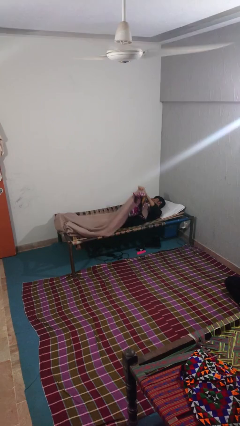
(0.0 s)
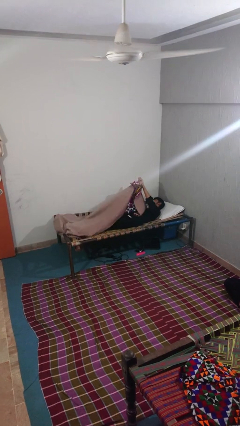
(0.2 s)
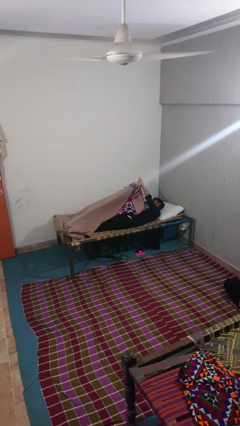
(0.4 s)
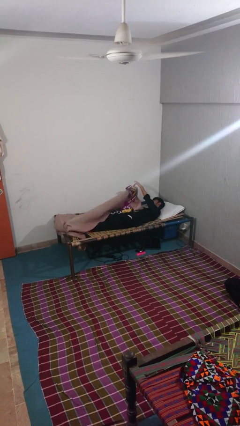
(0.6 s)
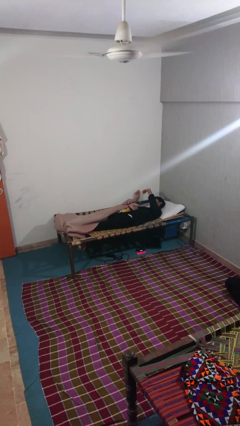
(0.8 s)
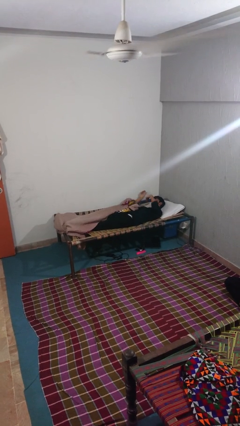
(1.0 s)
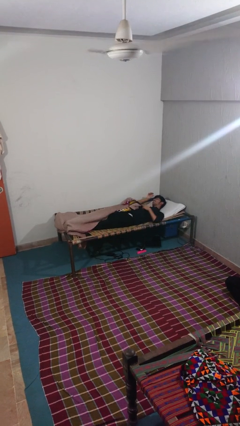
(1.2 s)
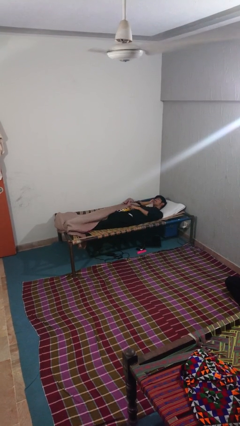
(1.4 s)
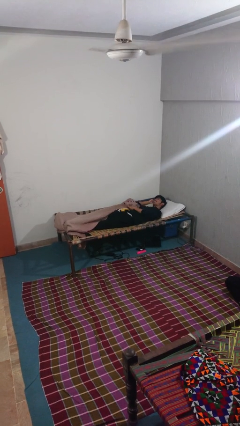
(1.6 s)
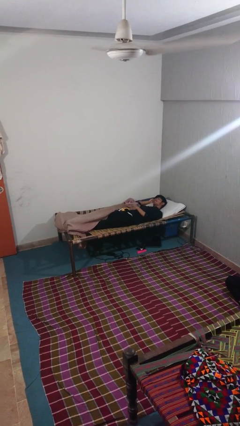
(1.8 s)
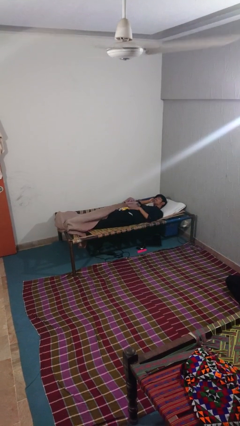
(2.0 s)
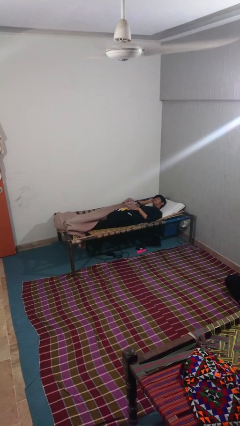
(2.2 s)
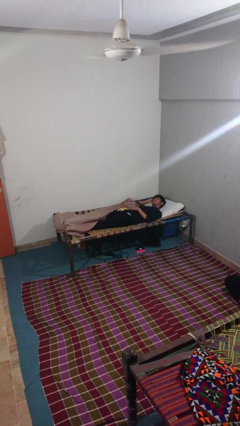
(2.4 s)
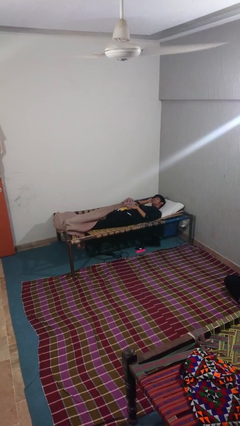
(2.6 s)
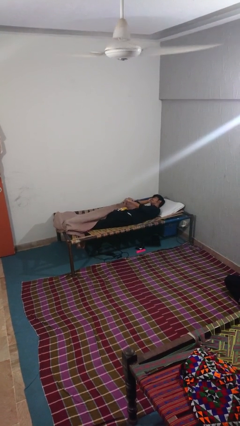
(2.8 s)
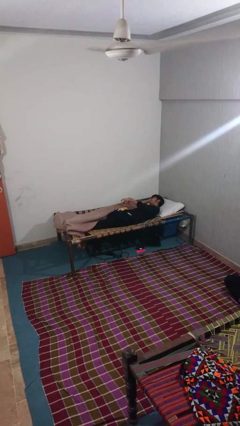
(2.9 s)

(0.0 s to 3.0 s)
person uncovers with blanket

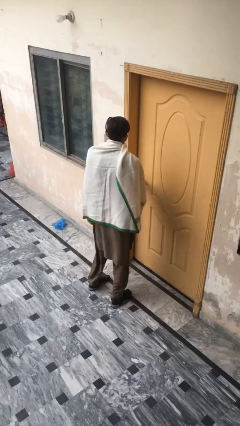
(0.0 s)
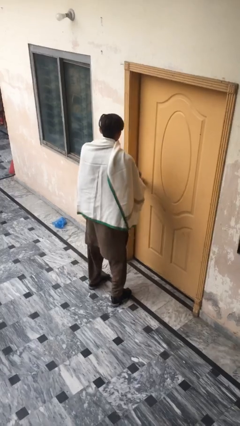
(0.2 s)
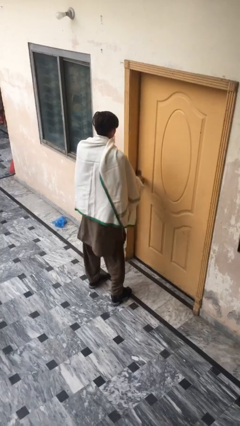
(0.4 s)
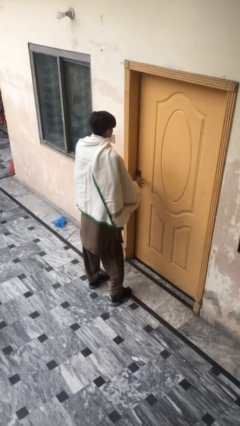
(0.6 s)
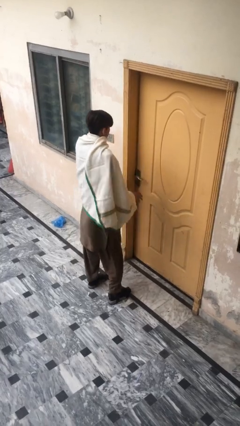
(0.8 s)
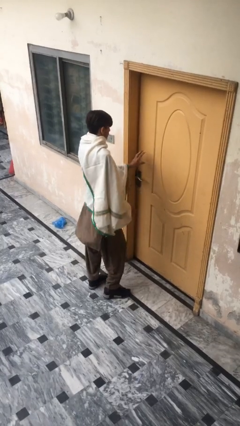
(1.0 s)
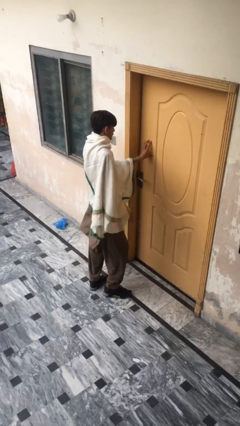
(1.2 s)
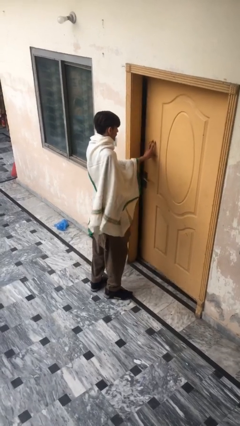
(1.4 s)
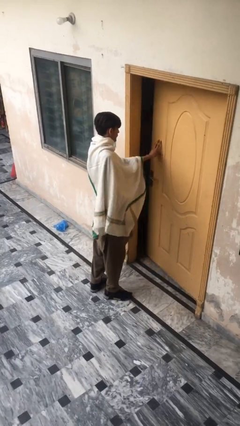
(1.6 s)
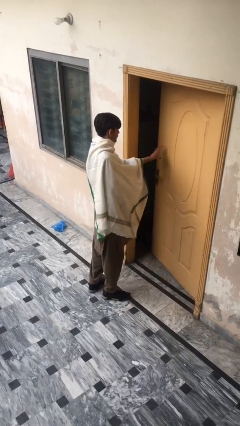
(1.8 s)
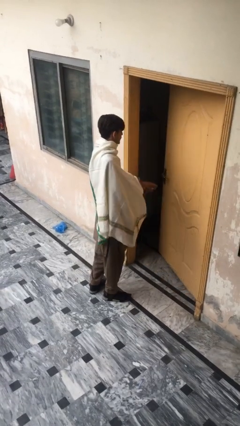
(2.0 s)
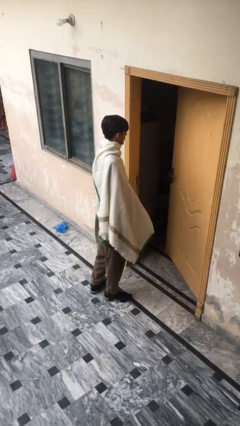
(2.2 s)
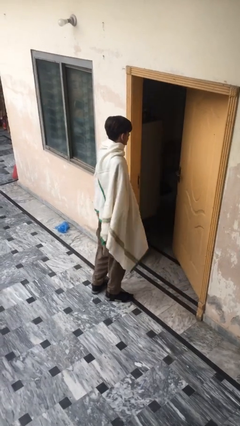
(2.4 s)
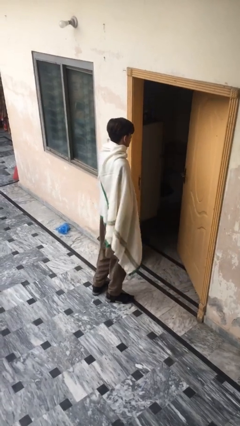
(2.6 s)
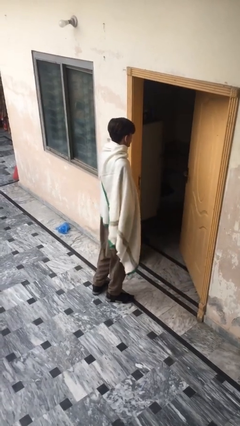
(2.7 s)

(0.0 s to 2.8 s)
person opens facility door

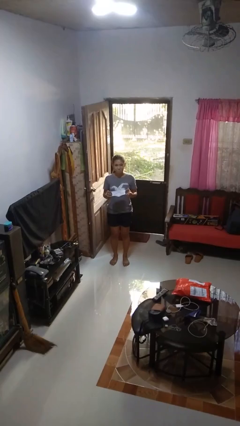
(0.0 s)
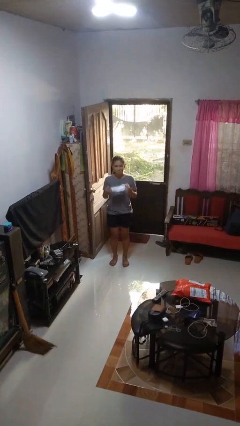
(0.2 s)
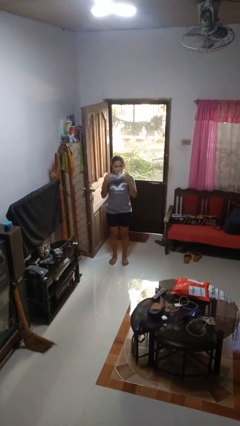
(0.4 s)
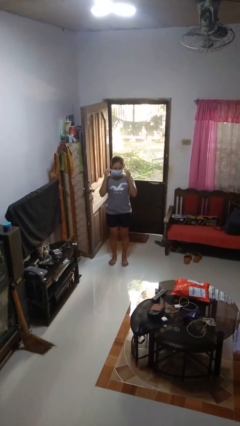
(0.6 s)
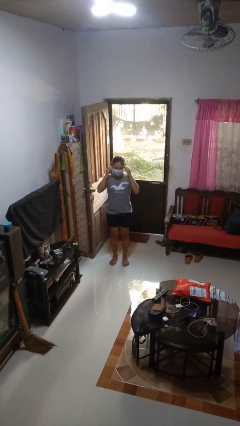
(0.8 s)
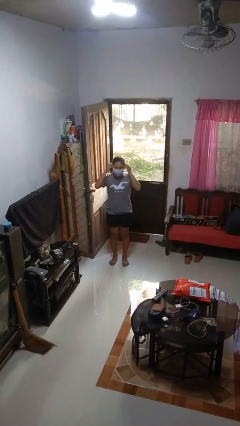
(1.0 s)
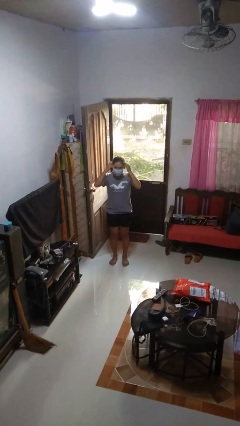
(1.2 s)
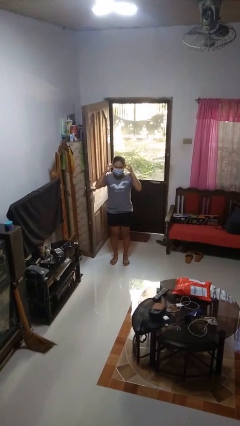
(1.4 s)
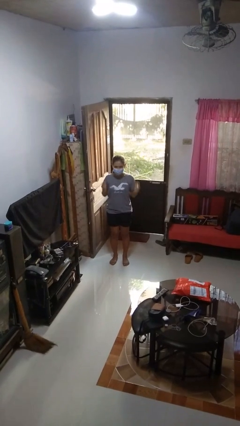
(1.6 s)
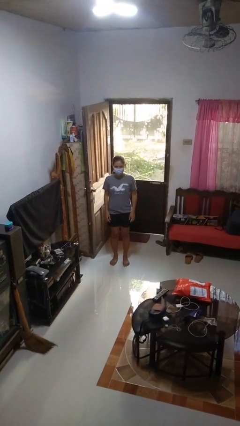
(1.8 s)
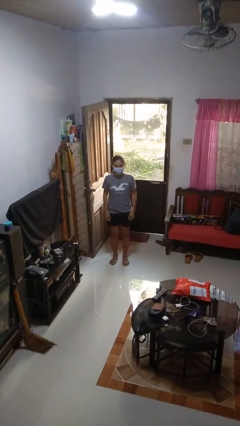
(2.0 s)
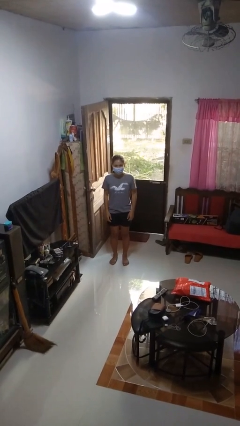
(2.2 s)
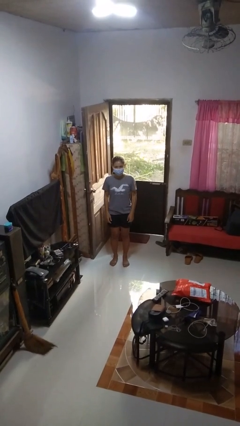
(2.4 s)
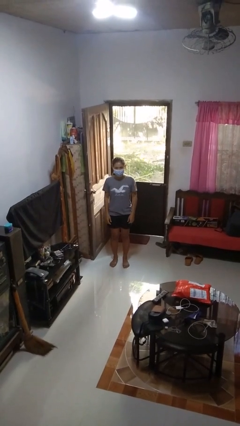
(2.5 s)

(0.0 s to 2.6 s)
person puts on facemask

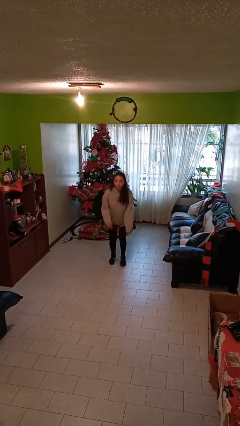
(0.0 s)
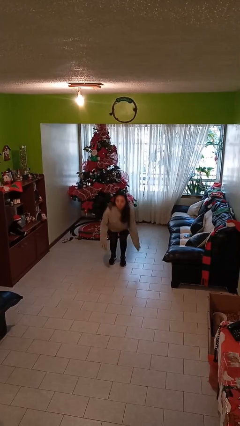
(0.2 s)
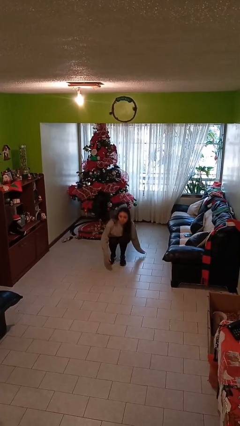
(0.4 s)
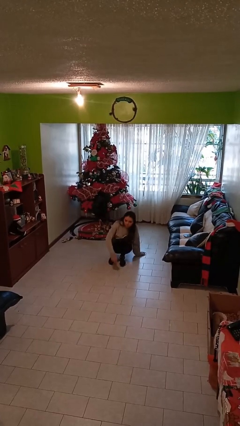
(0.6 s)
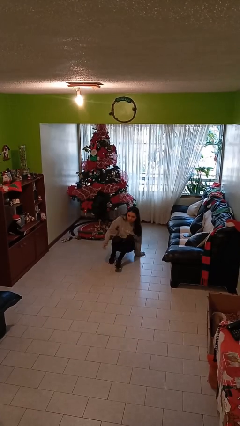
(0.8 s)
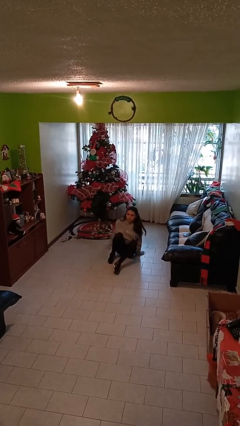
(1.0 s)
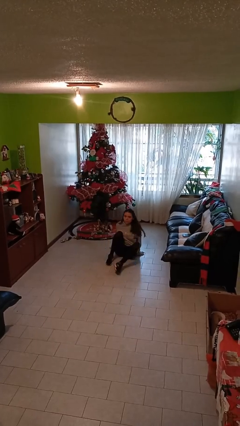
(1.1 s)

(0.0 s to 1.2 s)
person sits down

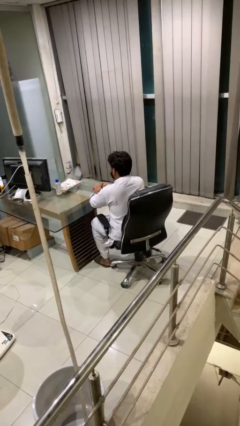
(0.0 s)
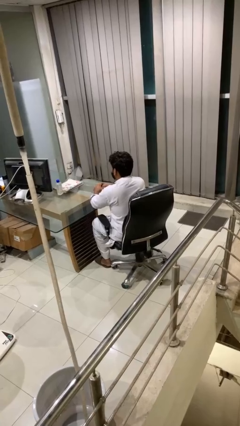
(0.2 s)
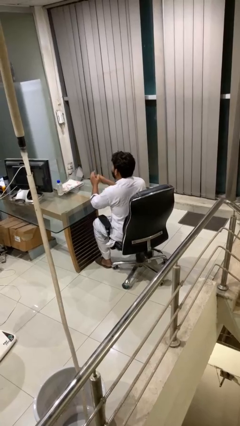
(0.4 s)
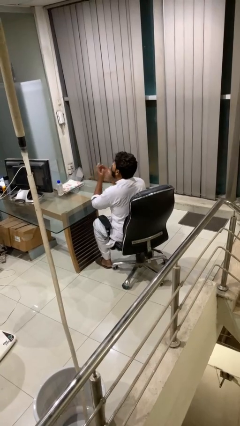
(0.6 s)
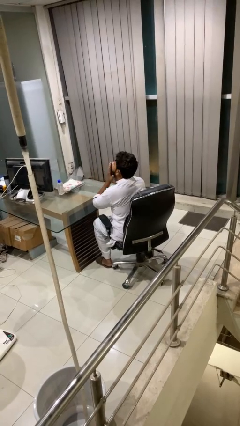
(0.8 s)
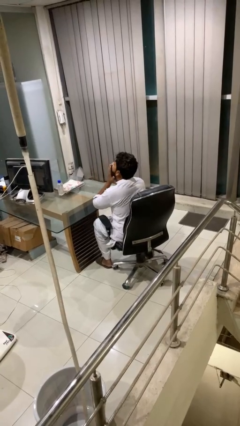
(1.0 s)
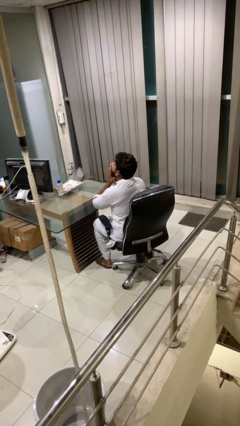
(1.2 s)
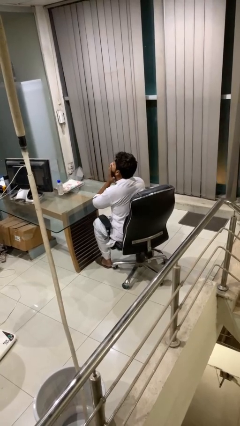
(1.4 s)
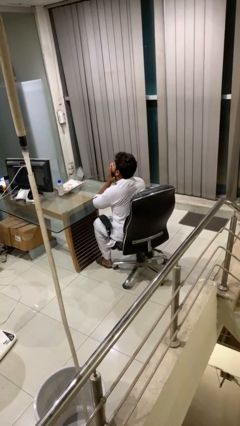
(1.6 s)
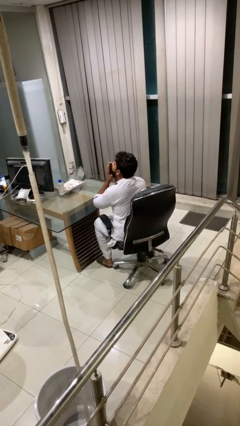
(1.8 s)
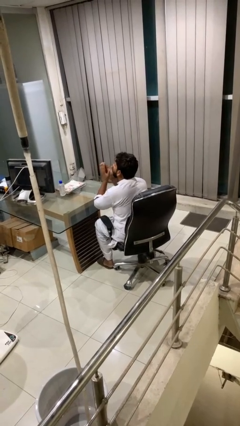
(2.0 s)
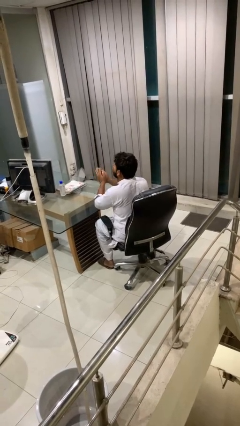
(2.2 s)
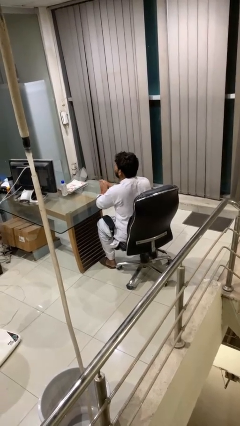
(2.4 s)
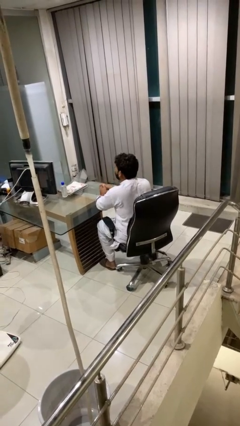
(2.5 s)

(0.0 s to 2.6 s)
person yawns

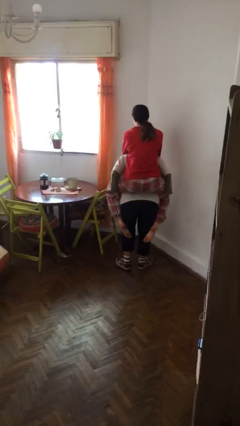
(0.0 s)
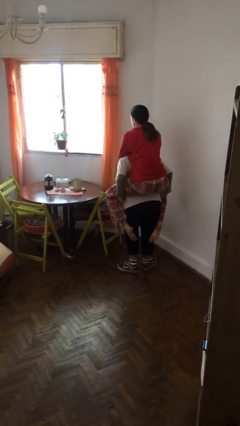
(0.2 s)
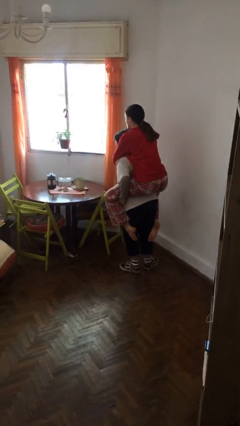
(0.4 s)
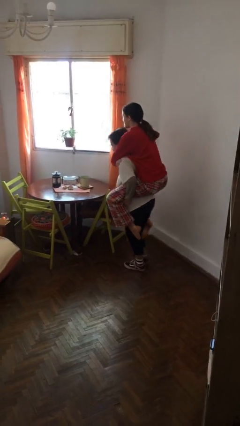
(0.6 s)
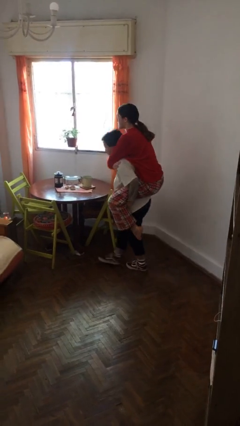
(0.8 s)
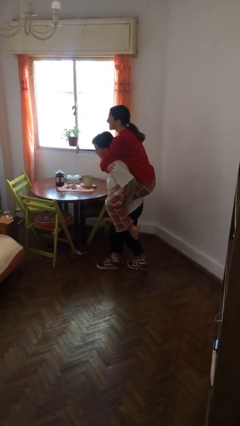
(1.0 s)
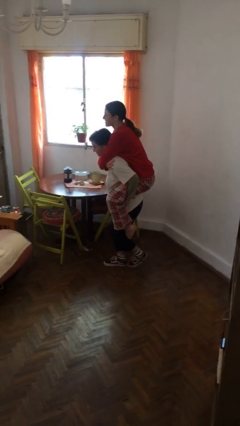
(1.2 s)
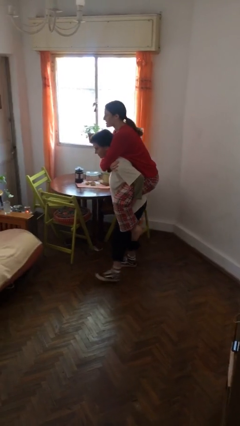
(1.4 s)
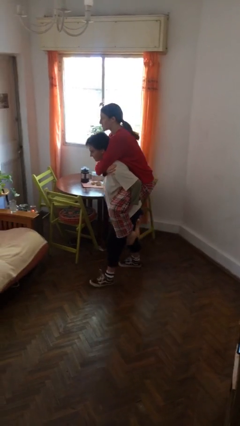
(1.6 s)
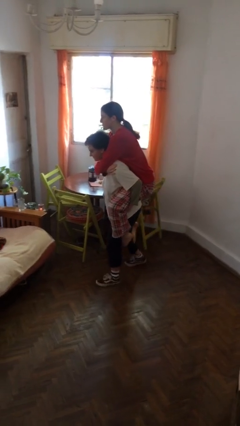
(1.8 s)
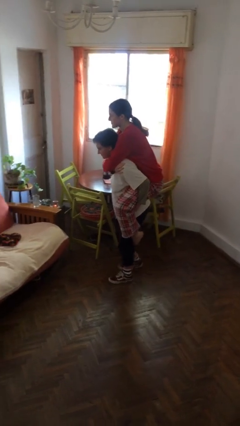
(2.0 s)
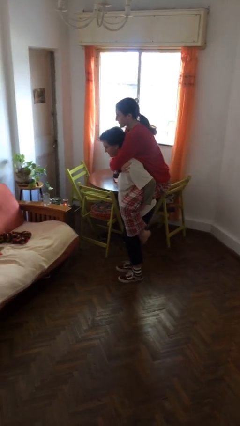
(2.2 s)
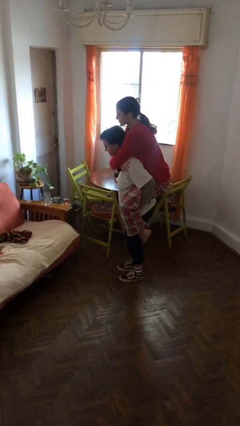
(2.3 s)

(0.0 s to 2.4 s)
person carries person on back

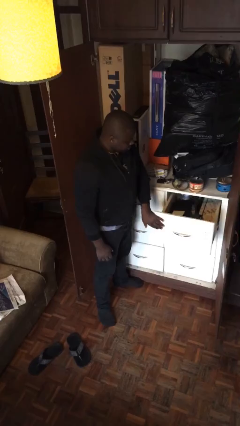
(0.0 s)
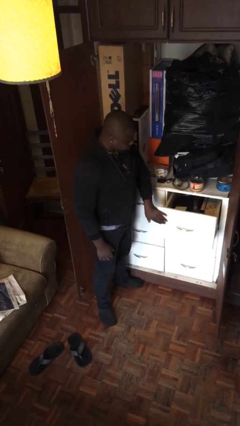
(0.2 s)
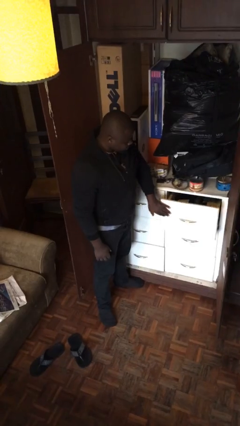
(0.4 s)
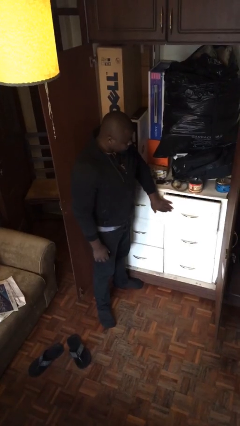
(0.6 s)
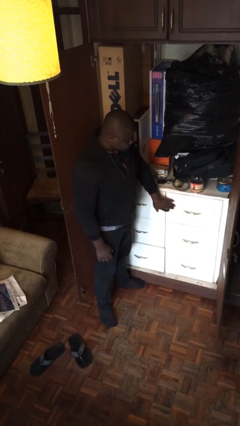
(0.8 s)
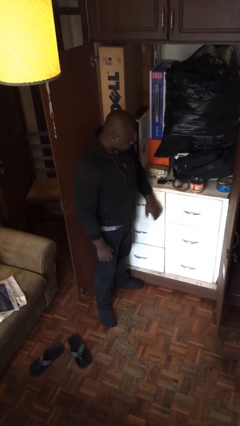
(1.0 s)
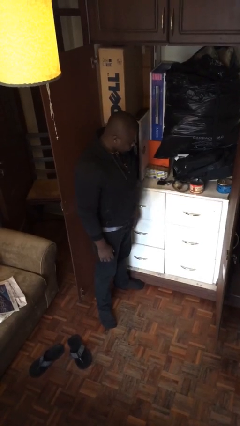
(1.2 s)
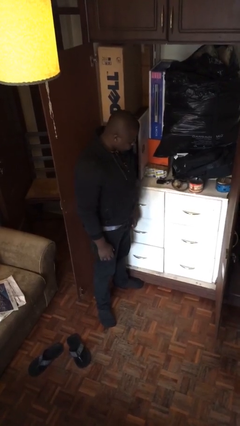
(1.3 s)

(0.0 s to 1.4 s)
person closes dresser drawer

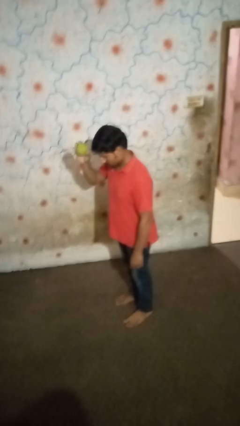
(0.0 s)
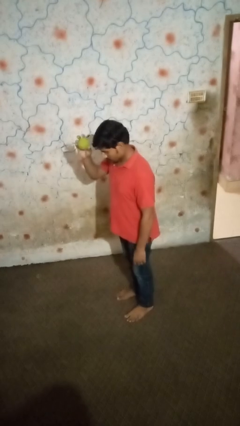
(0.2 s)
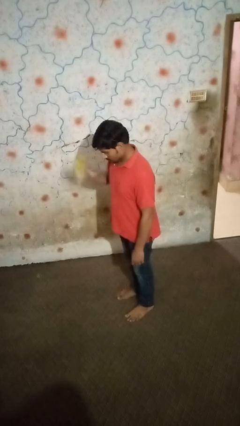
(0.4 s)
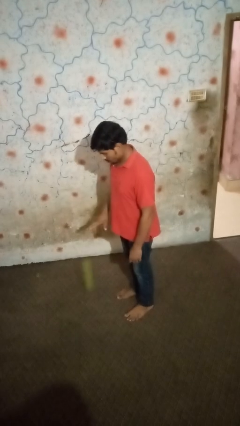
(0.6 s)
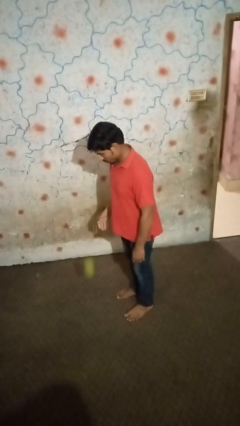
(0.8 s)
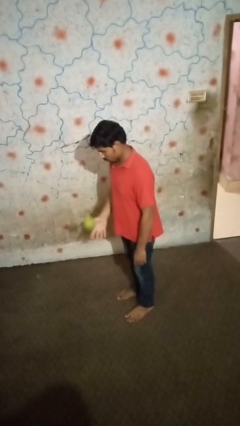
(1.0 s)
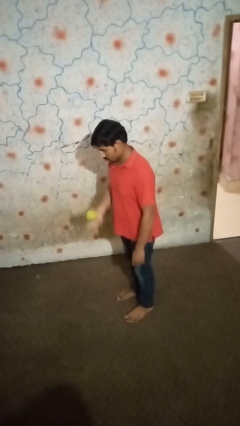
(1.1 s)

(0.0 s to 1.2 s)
person bounces ball on floor
